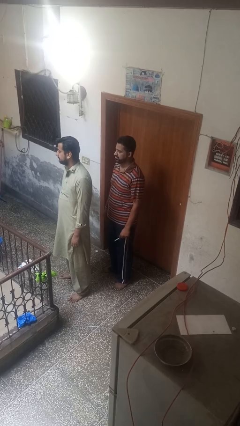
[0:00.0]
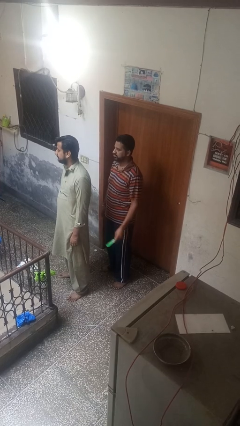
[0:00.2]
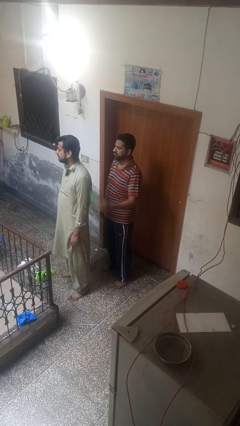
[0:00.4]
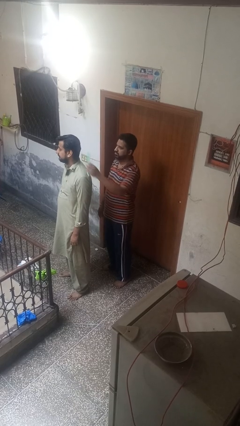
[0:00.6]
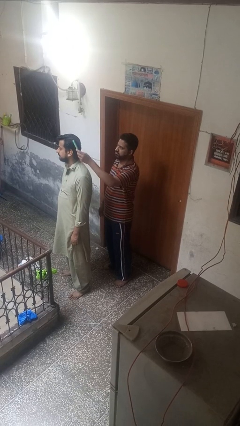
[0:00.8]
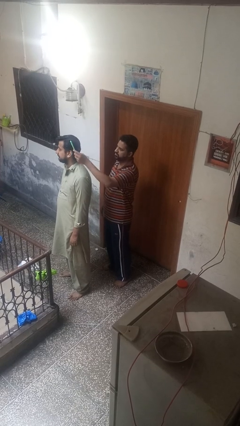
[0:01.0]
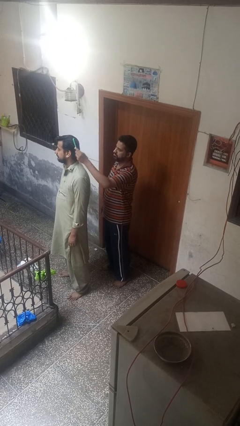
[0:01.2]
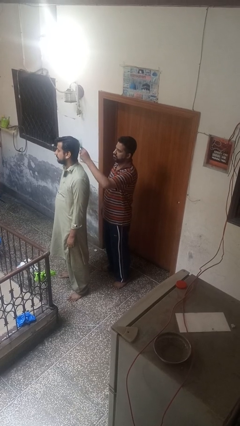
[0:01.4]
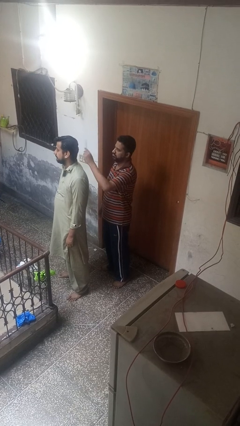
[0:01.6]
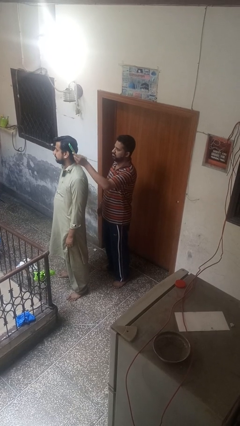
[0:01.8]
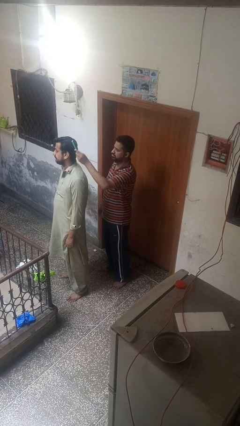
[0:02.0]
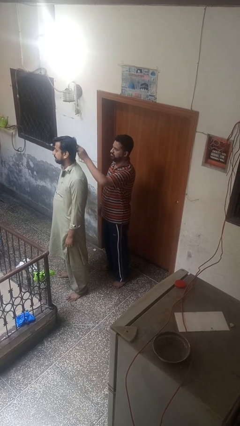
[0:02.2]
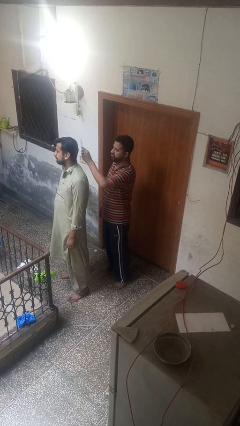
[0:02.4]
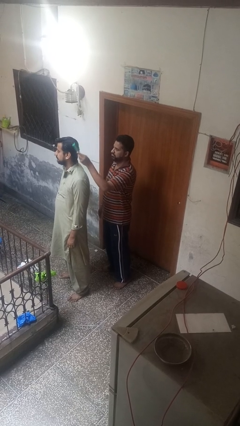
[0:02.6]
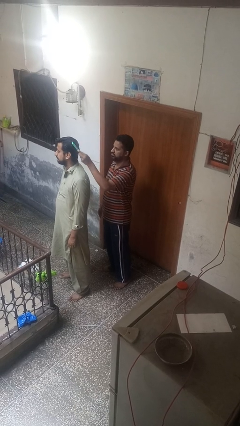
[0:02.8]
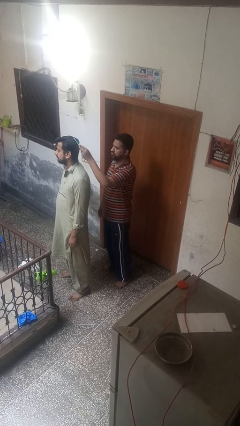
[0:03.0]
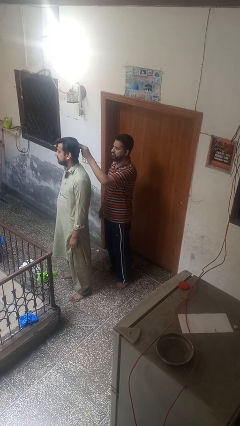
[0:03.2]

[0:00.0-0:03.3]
person brushes hair of person

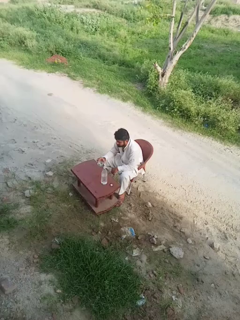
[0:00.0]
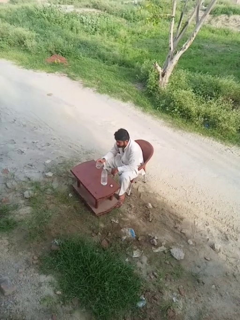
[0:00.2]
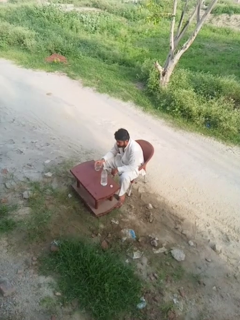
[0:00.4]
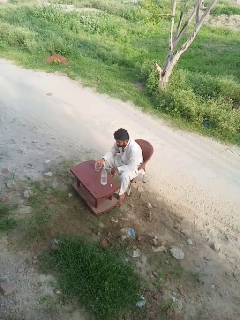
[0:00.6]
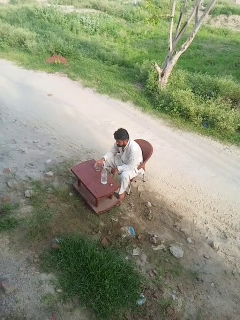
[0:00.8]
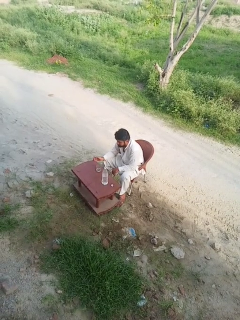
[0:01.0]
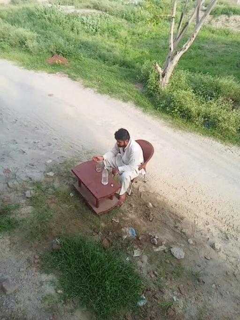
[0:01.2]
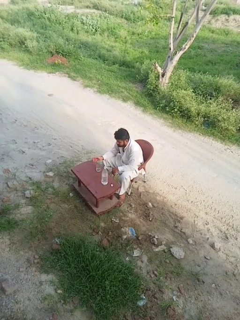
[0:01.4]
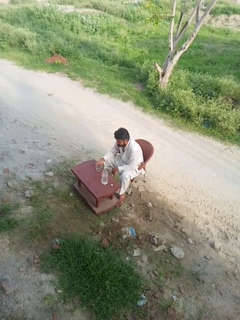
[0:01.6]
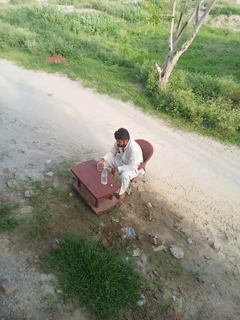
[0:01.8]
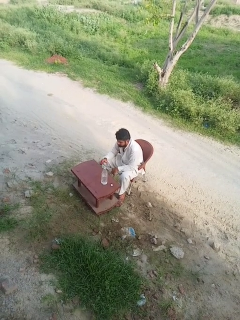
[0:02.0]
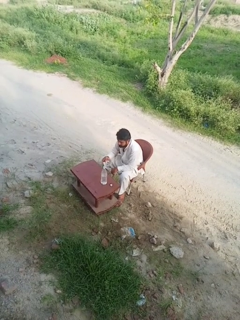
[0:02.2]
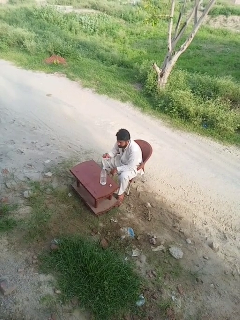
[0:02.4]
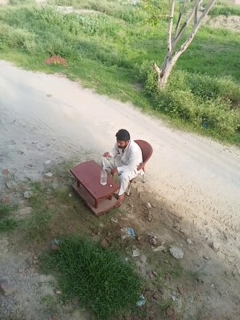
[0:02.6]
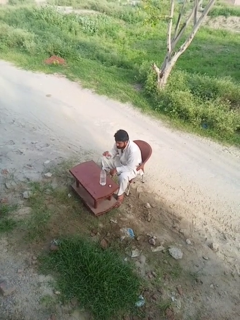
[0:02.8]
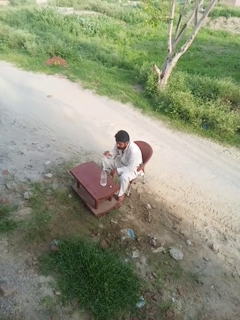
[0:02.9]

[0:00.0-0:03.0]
person picks up object from table

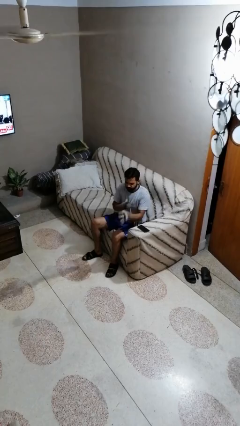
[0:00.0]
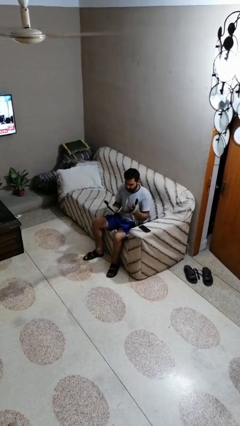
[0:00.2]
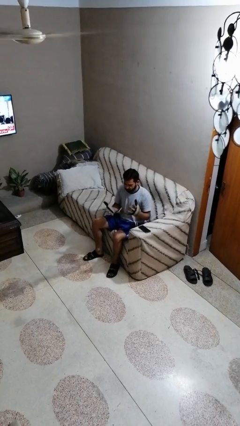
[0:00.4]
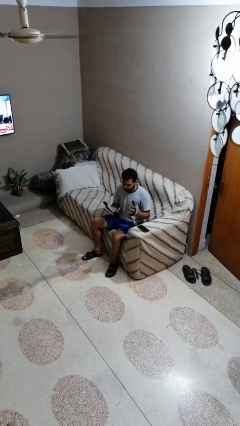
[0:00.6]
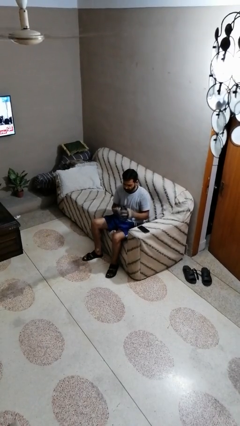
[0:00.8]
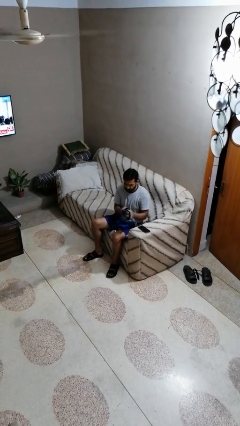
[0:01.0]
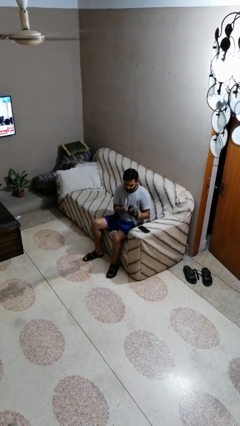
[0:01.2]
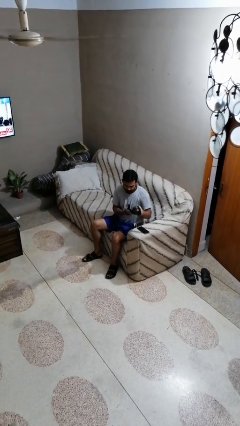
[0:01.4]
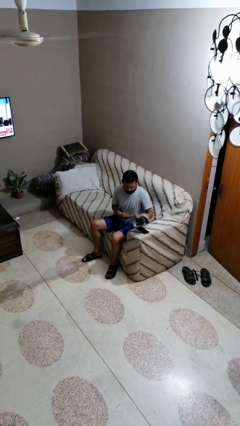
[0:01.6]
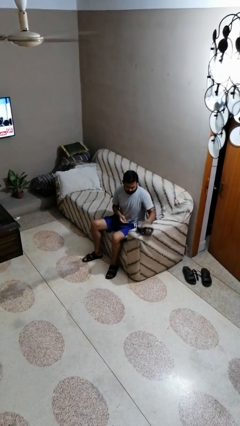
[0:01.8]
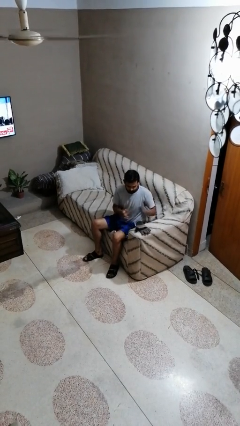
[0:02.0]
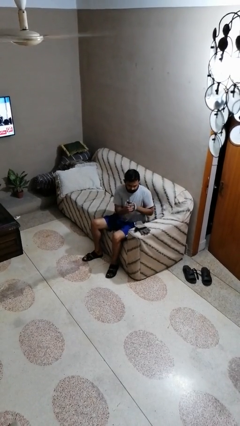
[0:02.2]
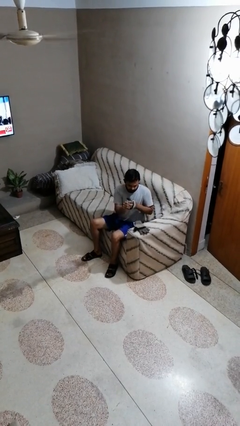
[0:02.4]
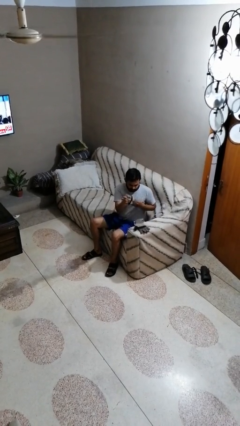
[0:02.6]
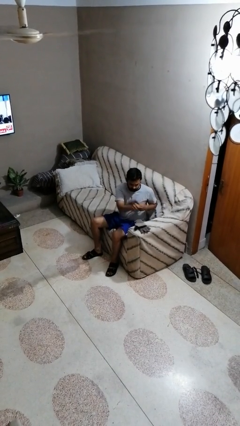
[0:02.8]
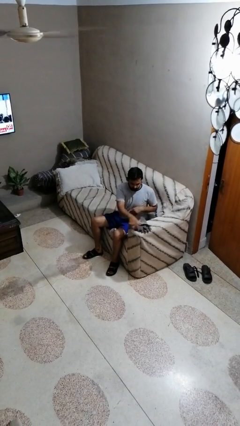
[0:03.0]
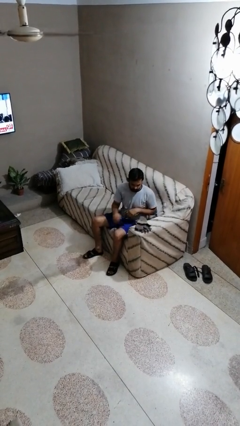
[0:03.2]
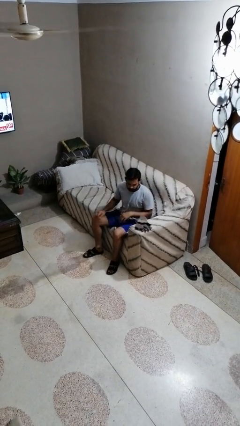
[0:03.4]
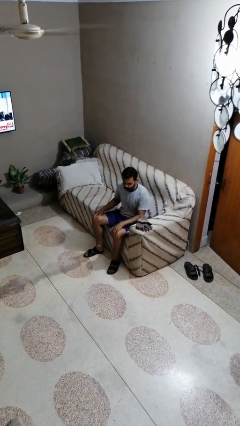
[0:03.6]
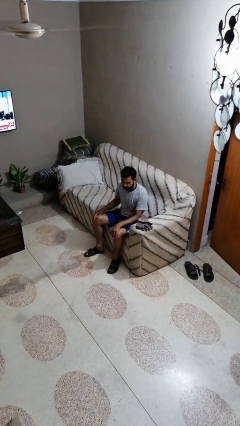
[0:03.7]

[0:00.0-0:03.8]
person takes off gloves

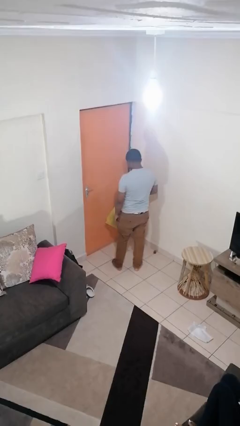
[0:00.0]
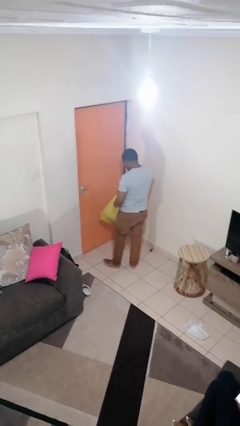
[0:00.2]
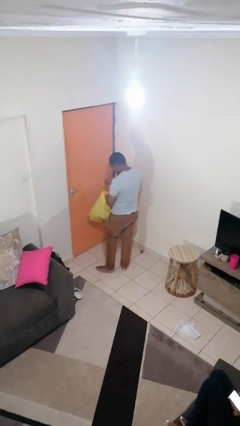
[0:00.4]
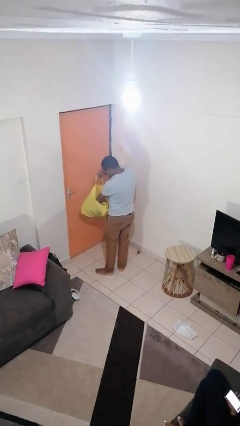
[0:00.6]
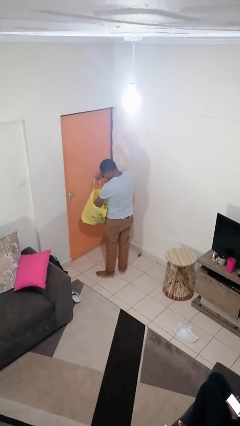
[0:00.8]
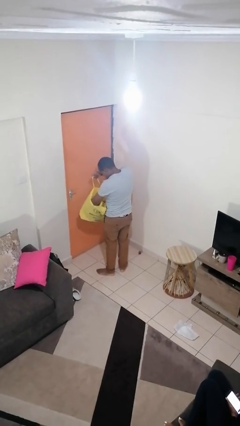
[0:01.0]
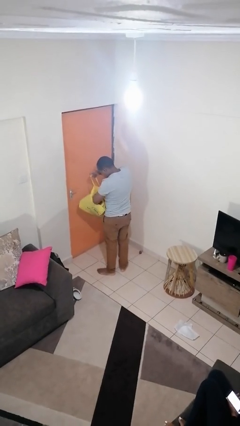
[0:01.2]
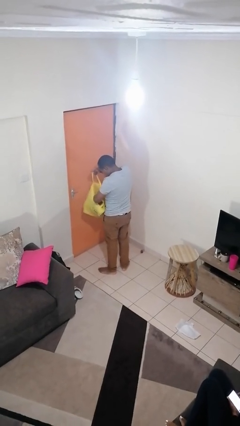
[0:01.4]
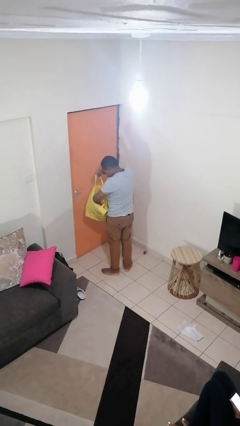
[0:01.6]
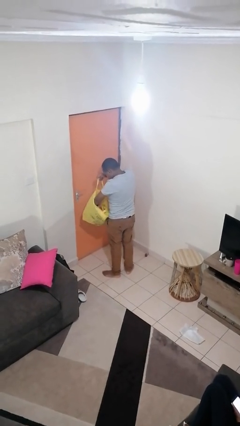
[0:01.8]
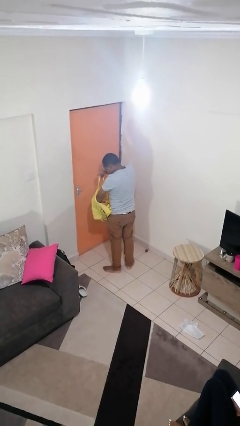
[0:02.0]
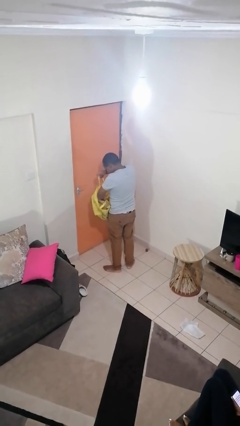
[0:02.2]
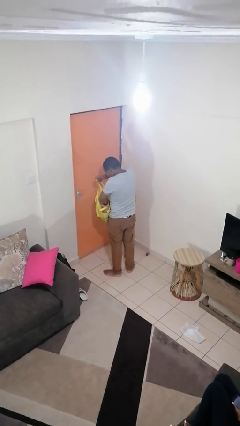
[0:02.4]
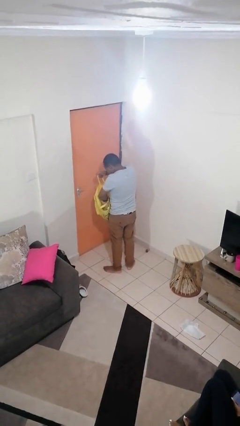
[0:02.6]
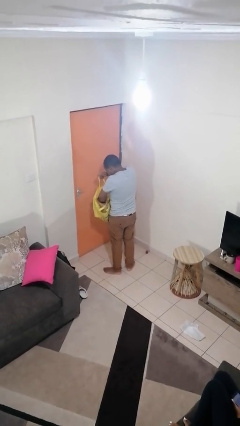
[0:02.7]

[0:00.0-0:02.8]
person searches in bag

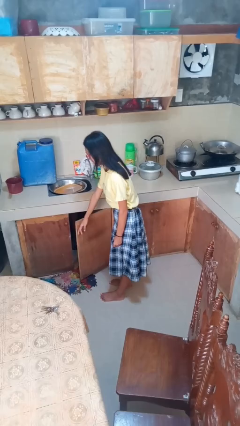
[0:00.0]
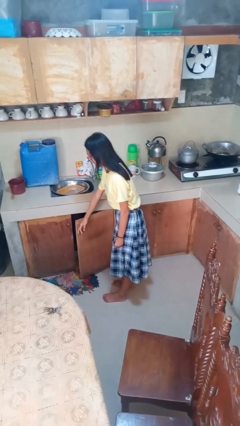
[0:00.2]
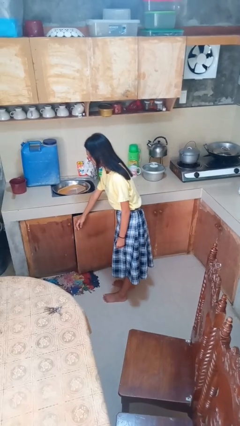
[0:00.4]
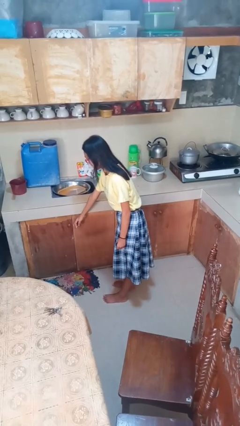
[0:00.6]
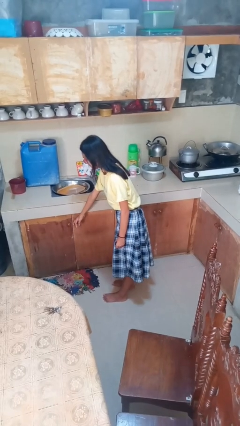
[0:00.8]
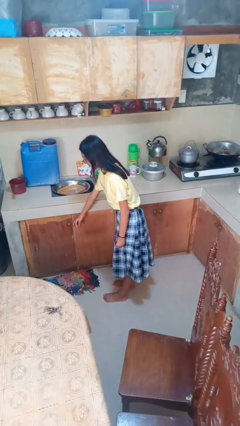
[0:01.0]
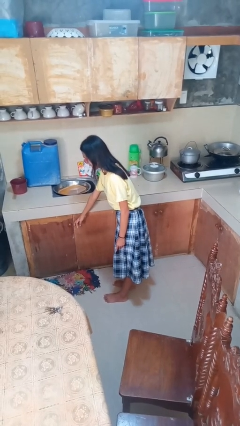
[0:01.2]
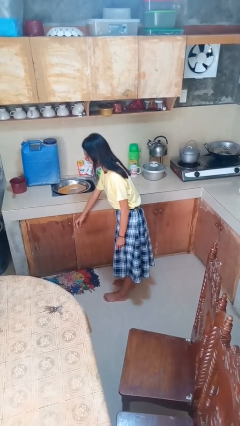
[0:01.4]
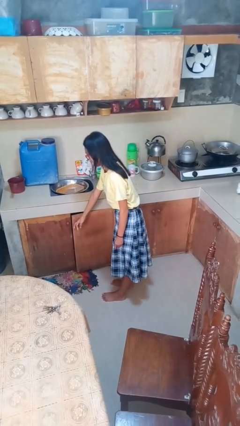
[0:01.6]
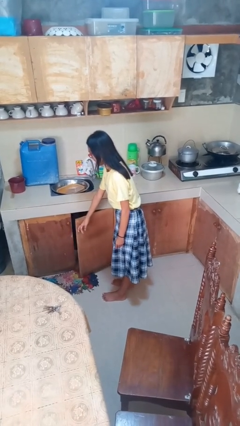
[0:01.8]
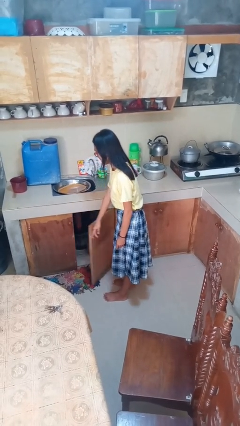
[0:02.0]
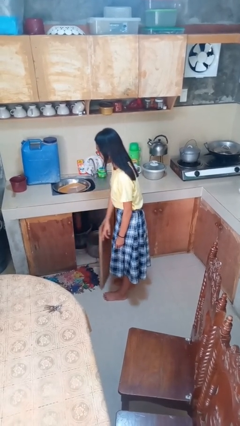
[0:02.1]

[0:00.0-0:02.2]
person closes cabinet

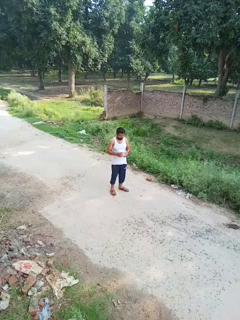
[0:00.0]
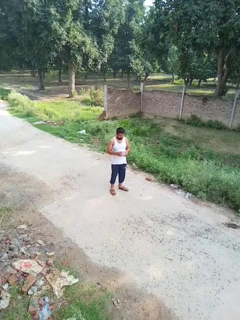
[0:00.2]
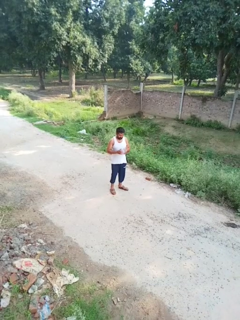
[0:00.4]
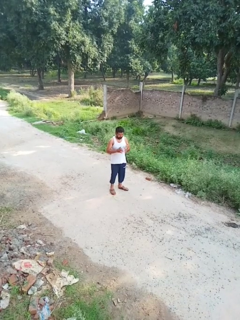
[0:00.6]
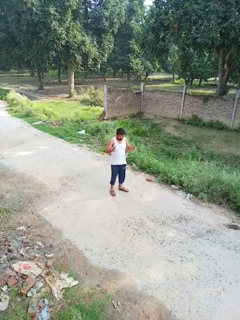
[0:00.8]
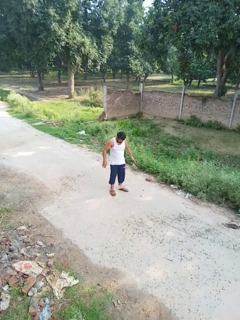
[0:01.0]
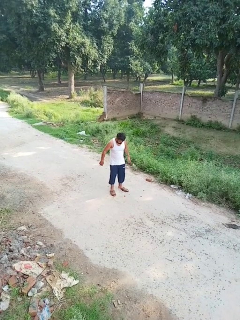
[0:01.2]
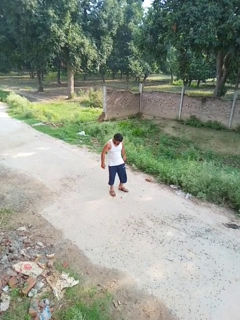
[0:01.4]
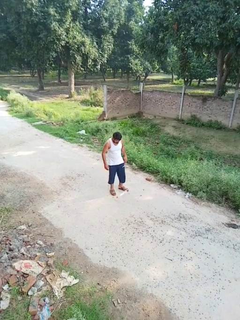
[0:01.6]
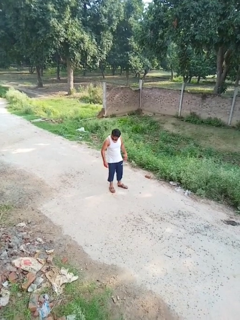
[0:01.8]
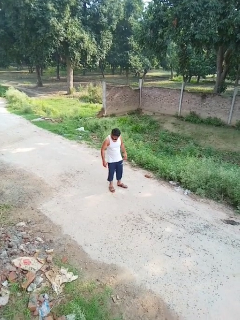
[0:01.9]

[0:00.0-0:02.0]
person drops object

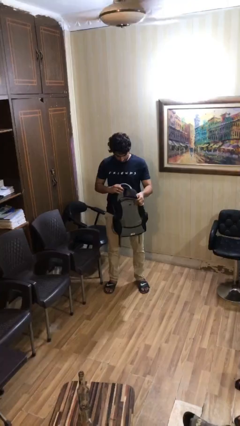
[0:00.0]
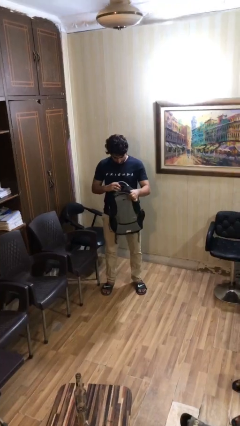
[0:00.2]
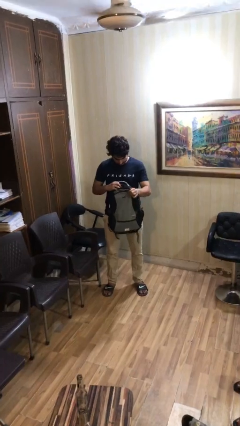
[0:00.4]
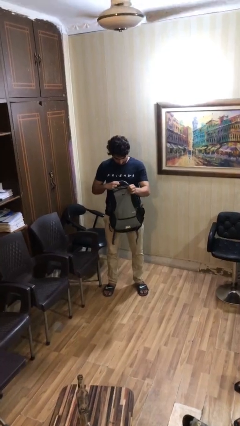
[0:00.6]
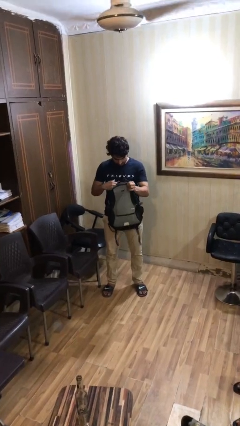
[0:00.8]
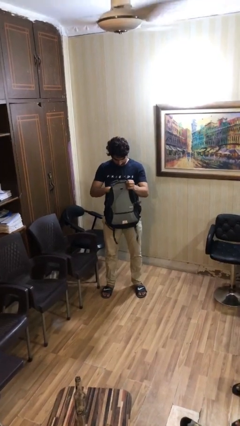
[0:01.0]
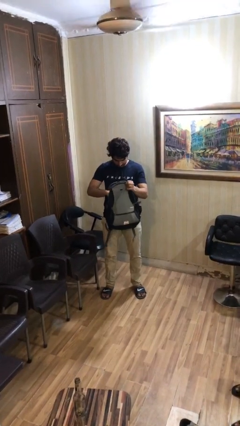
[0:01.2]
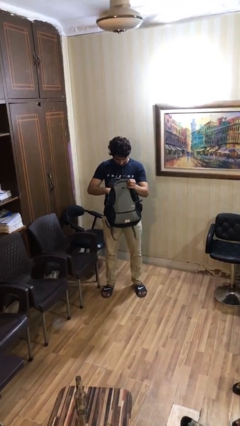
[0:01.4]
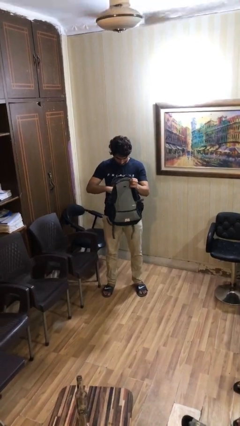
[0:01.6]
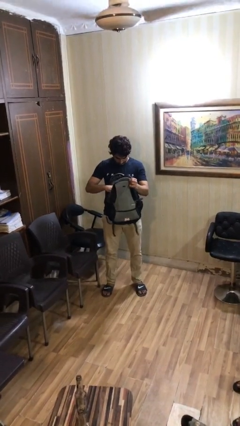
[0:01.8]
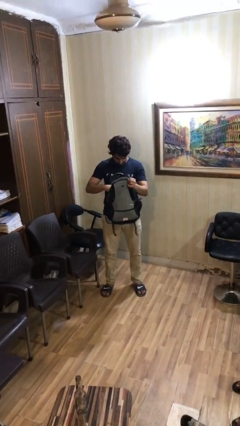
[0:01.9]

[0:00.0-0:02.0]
person searches in backpack
